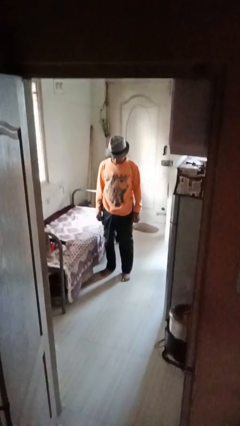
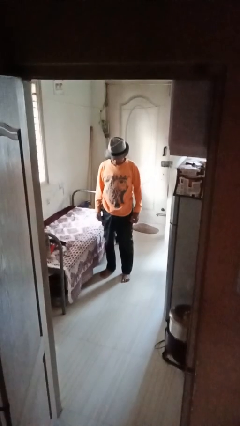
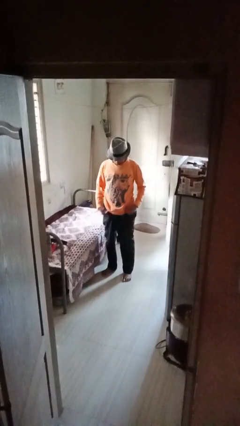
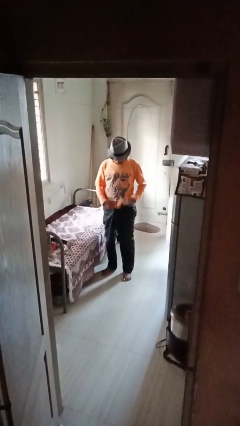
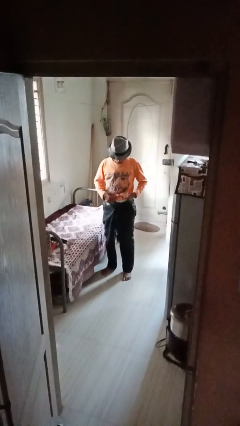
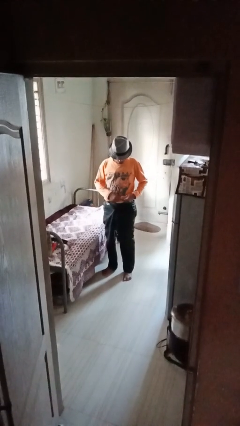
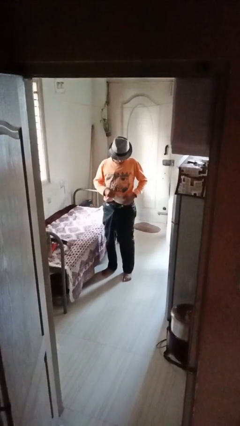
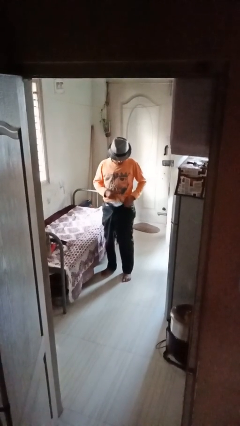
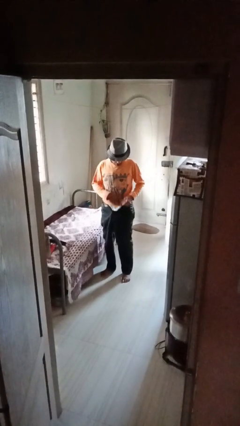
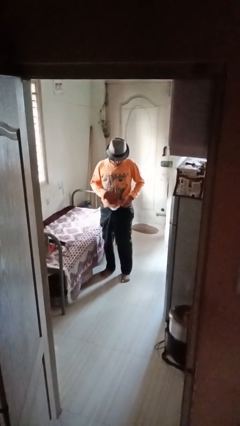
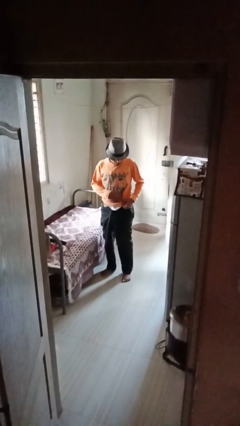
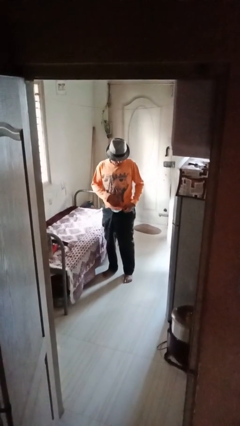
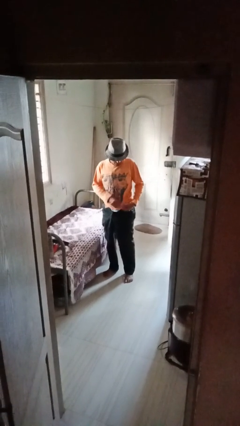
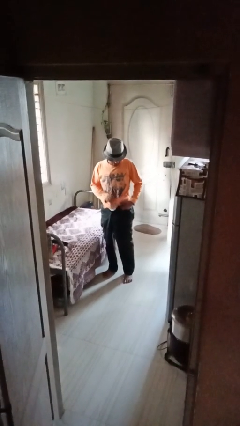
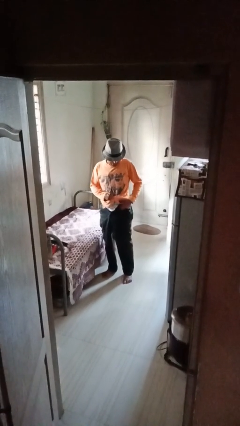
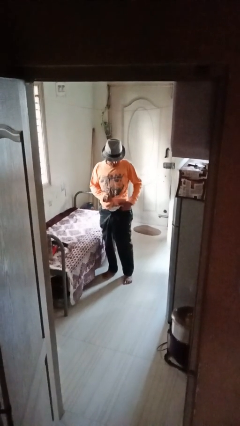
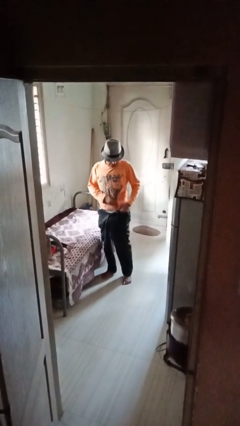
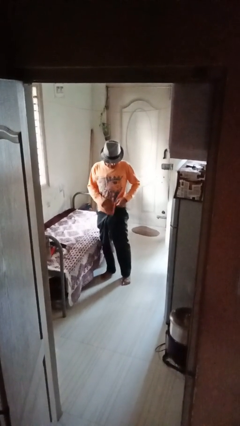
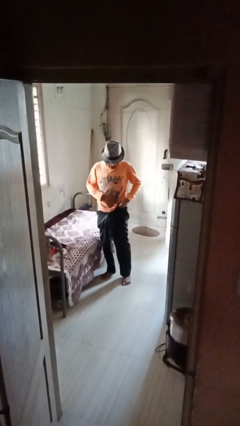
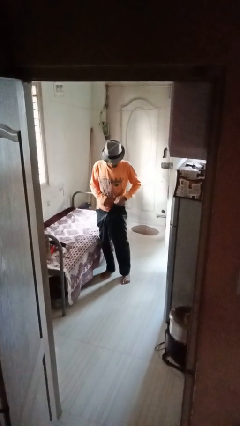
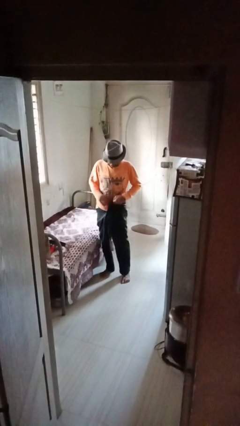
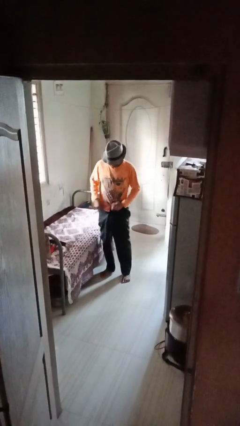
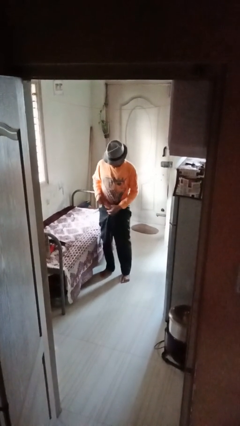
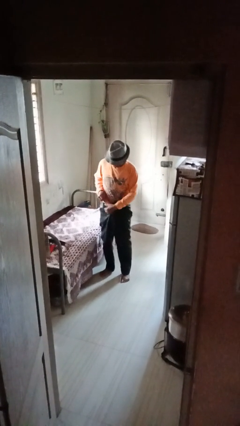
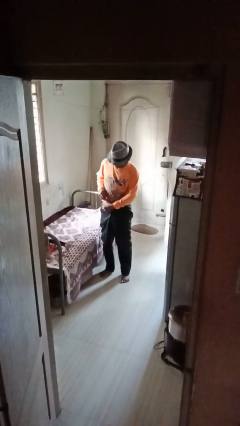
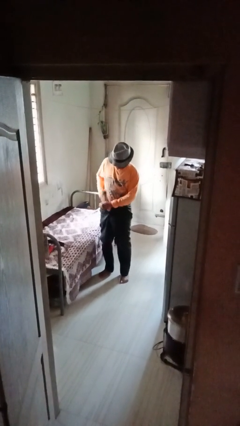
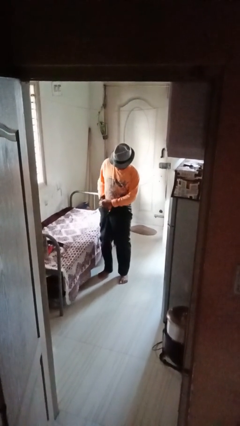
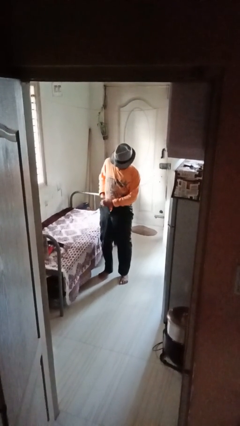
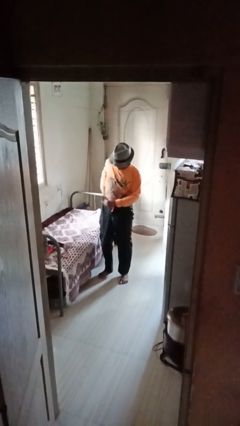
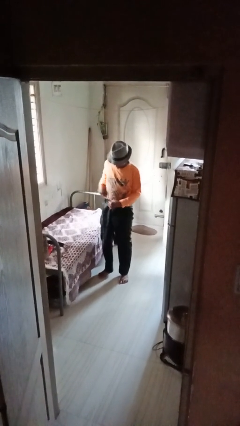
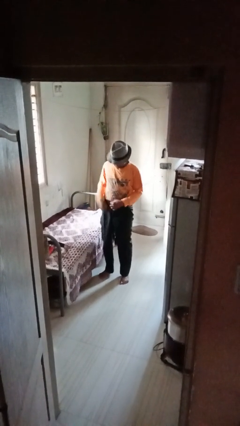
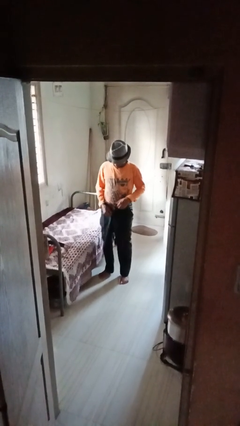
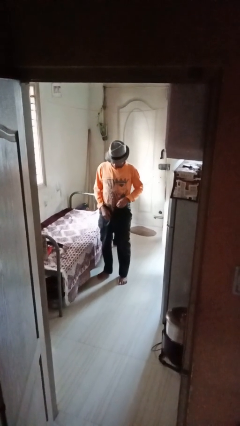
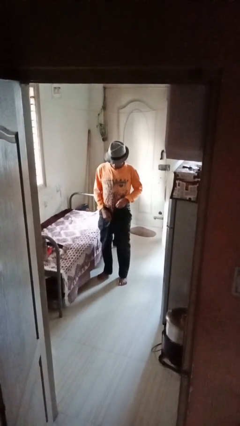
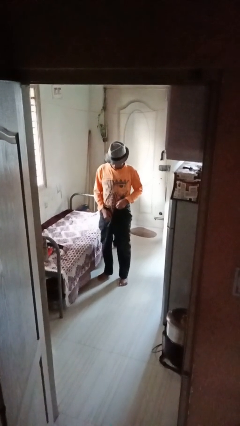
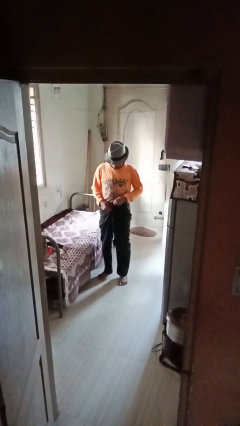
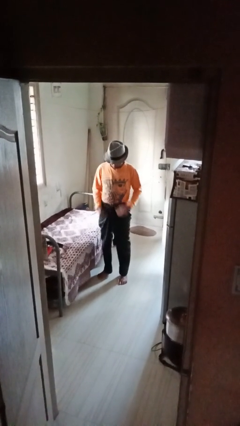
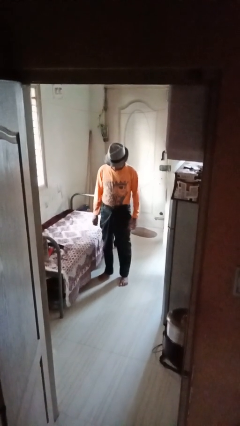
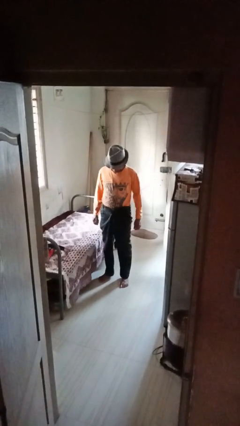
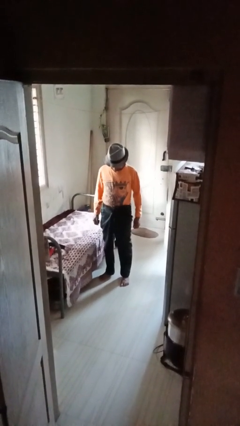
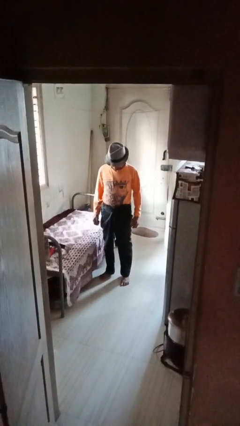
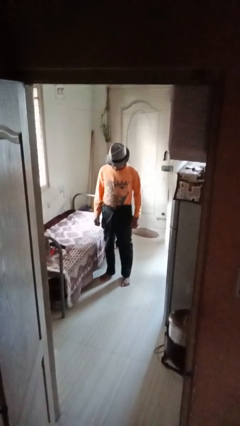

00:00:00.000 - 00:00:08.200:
person tucks in shirt

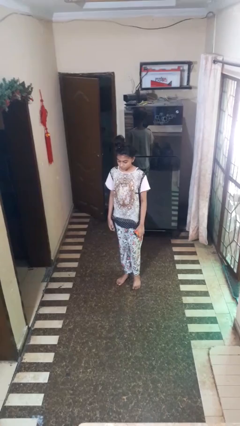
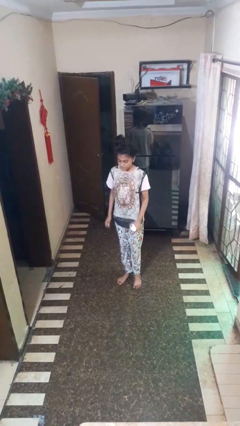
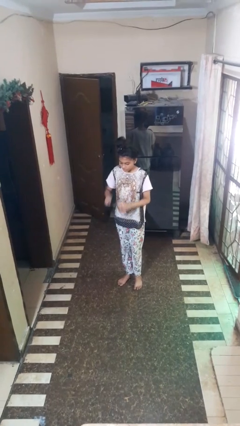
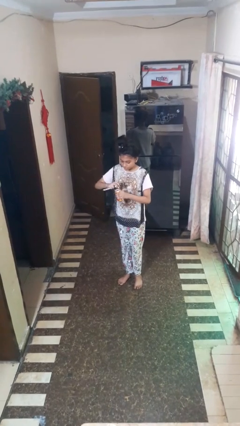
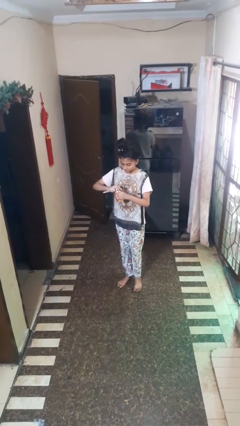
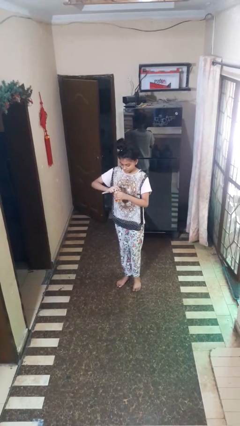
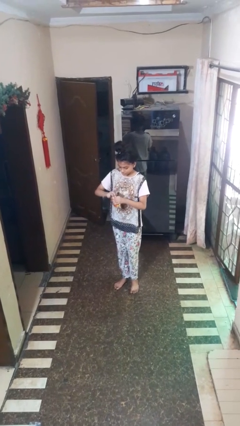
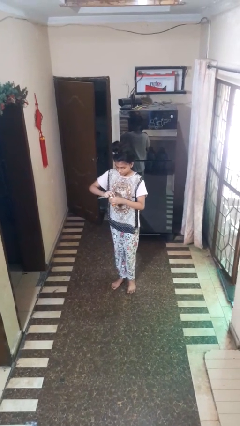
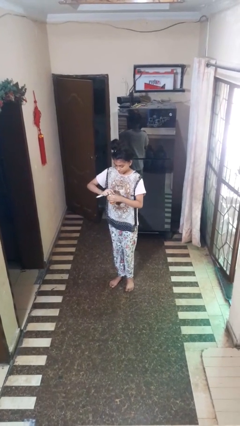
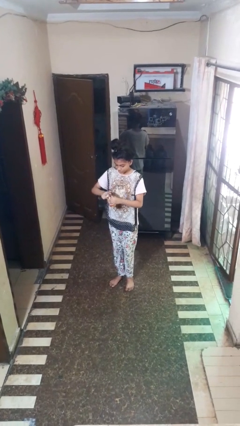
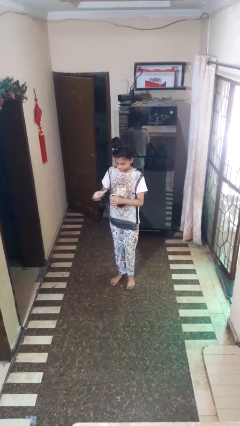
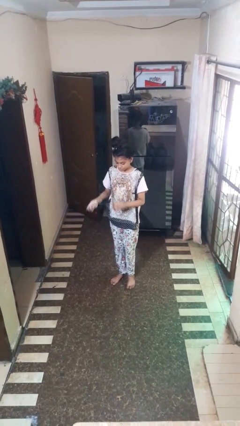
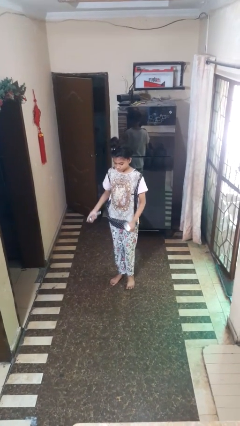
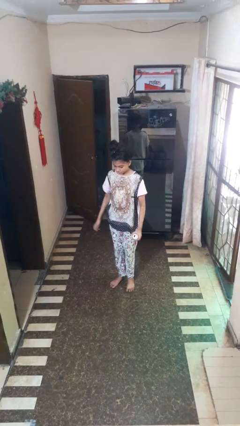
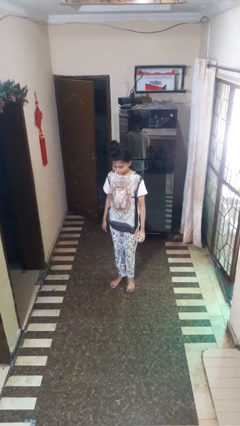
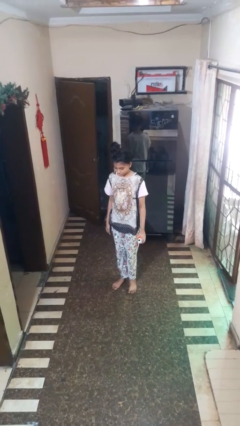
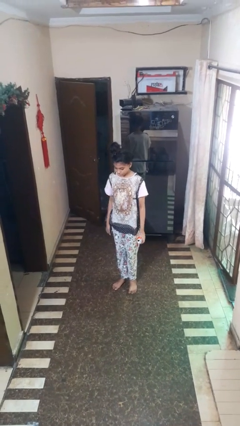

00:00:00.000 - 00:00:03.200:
person opens can with can opener

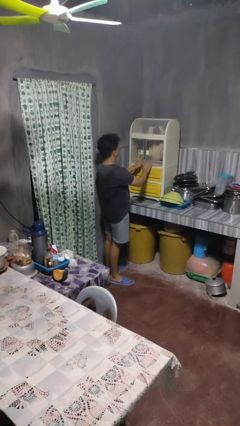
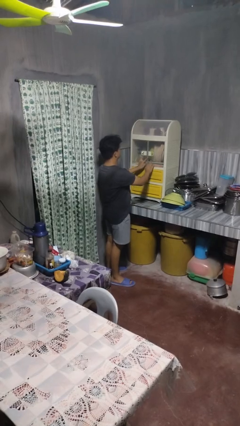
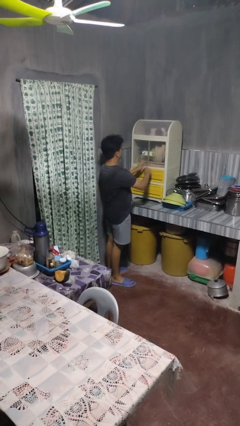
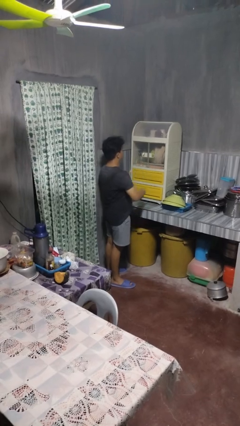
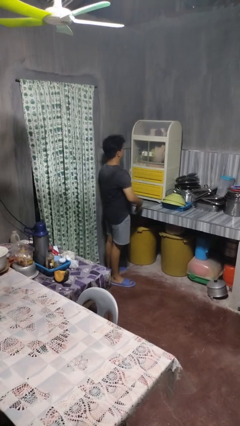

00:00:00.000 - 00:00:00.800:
person closes cabinet

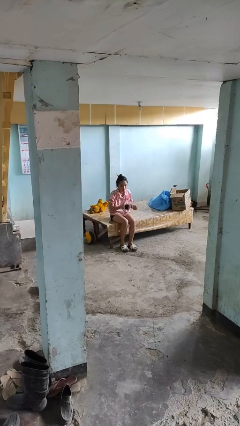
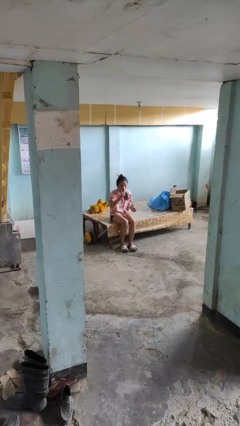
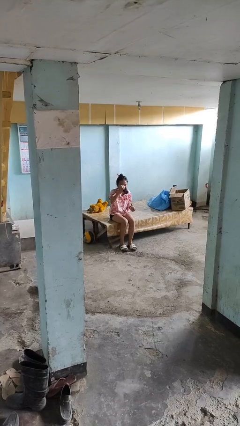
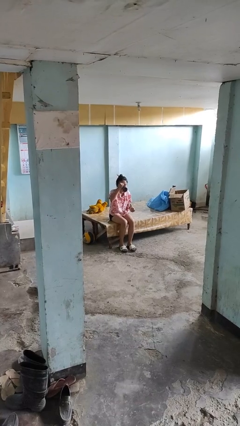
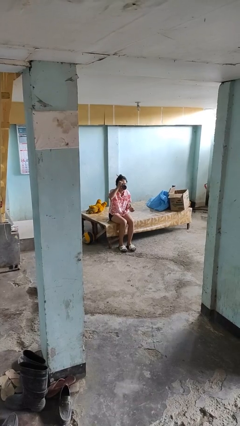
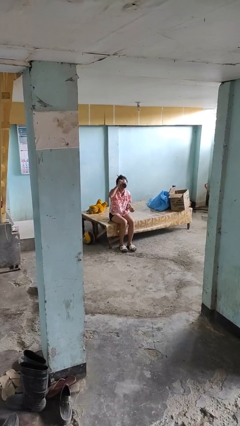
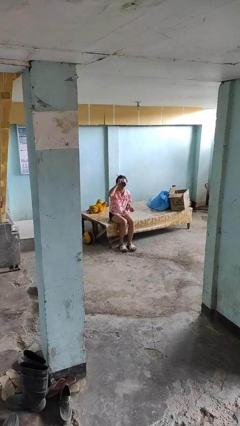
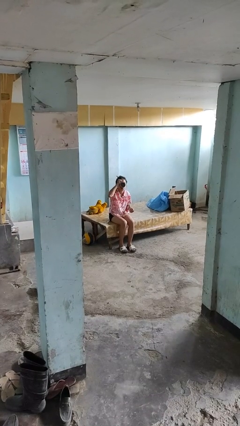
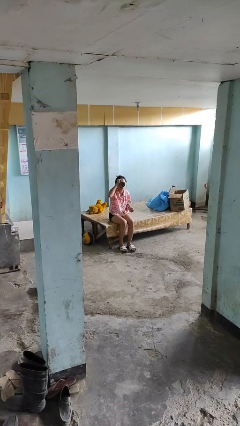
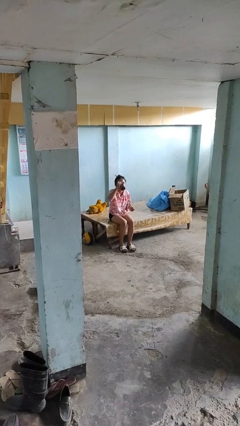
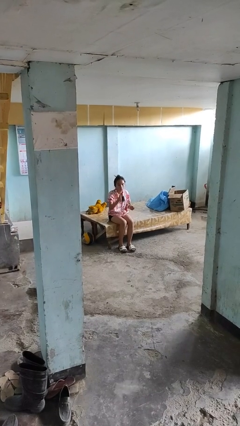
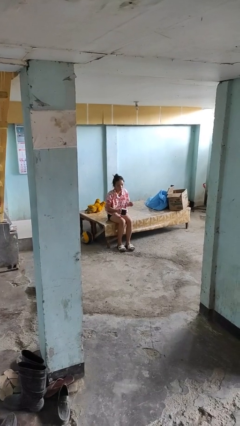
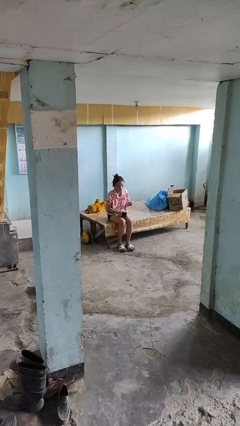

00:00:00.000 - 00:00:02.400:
person drinks from mug

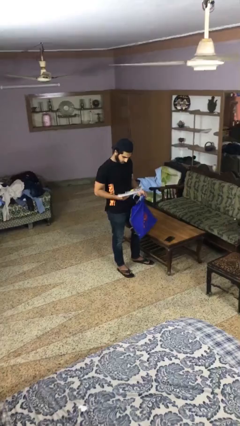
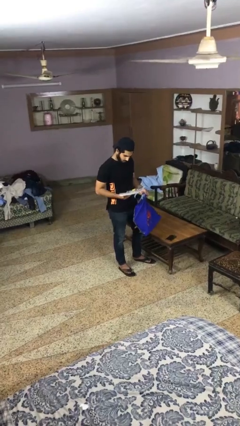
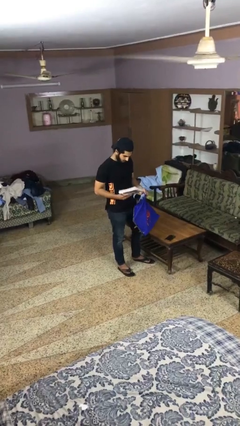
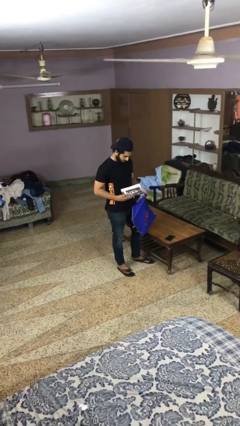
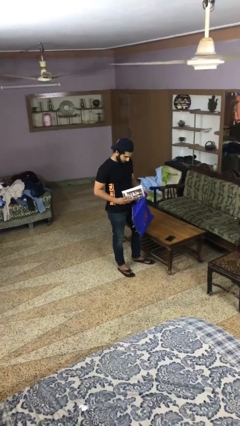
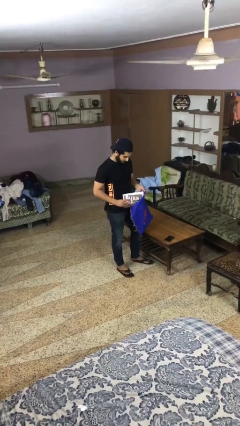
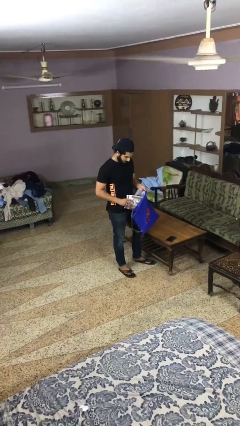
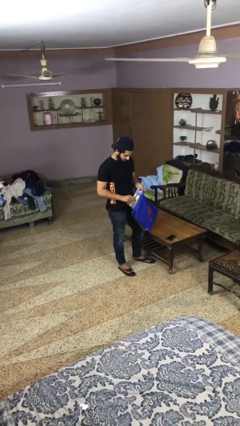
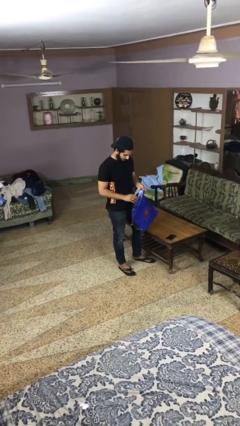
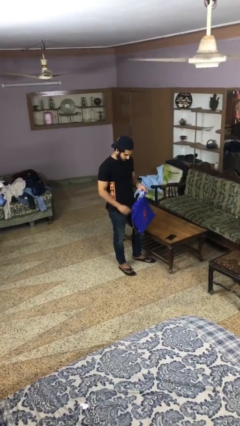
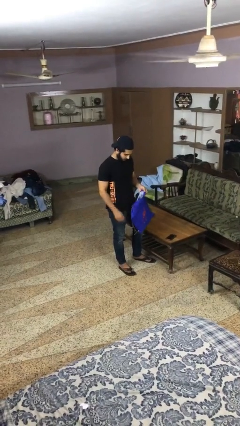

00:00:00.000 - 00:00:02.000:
person puts object into bag

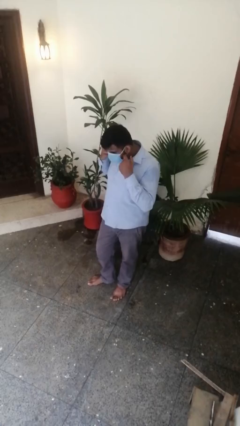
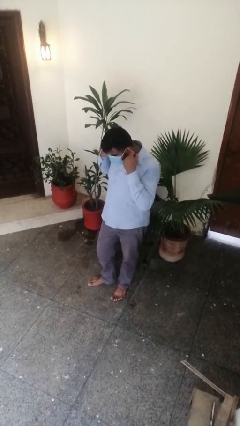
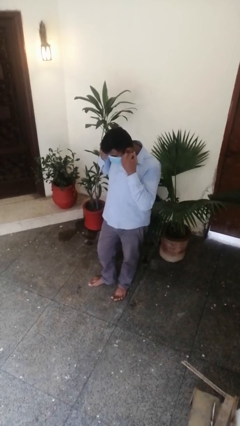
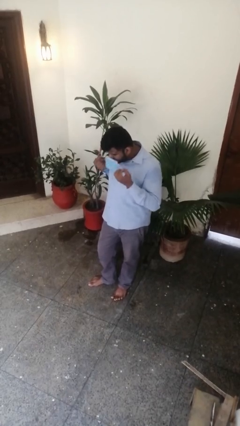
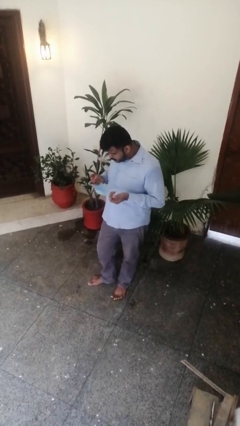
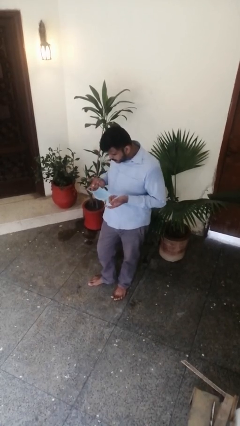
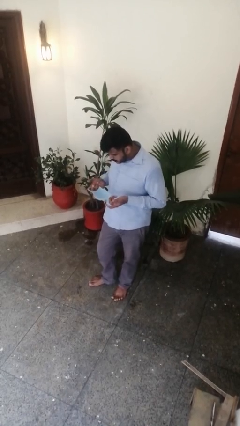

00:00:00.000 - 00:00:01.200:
person takes off facemask
